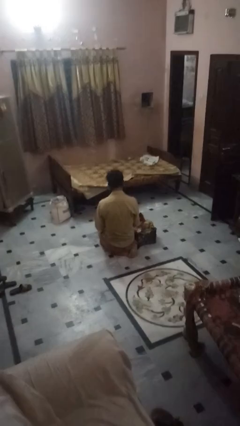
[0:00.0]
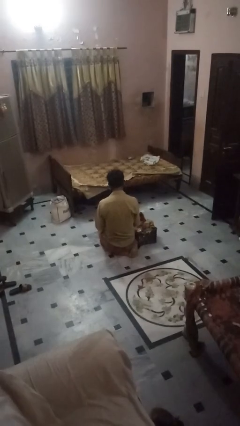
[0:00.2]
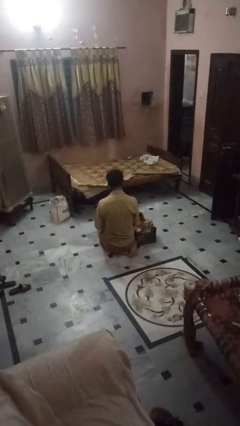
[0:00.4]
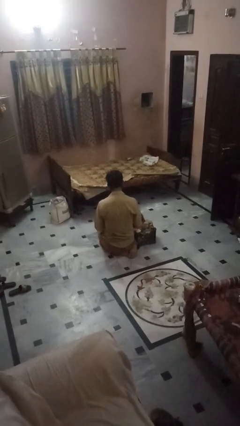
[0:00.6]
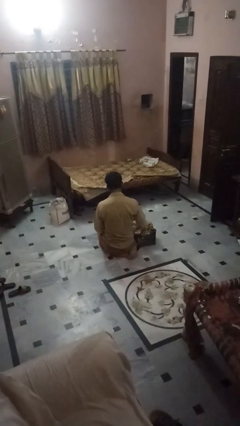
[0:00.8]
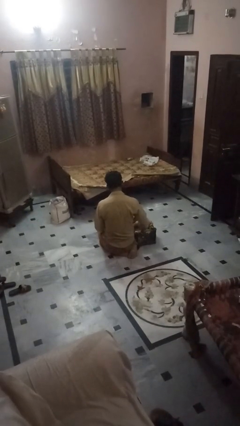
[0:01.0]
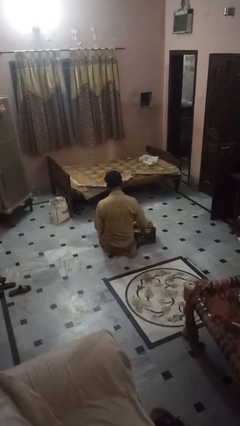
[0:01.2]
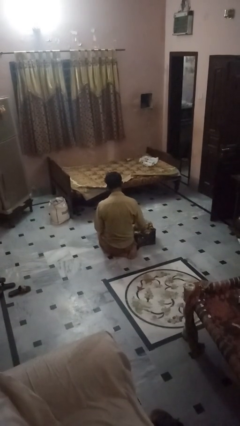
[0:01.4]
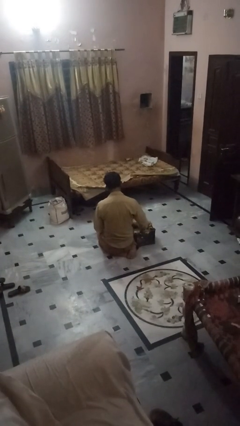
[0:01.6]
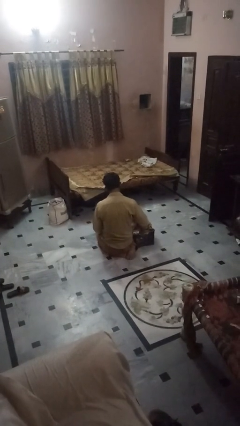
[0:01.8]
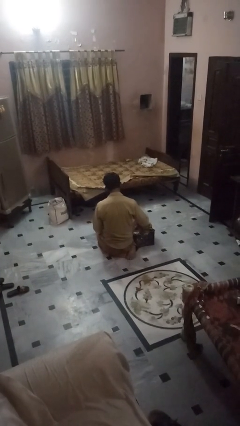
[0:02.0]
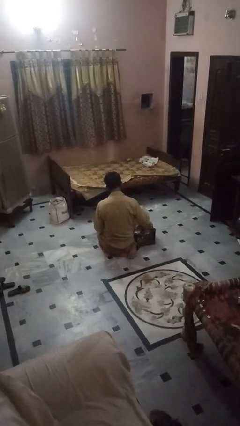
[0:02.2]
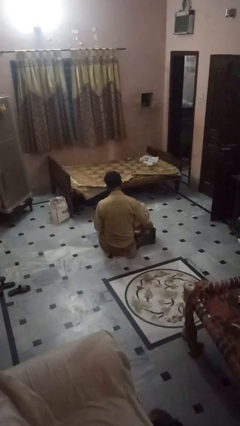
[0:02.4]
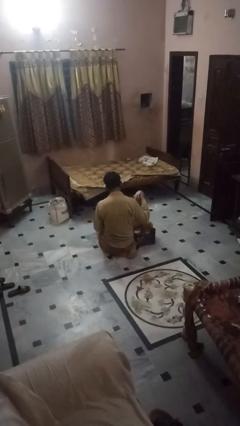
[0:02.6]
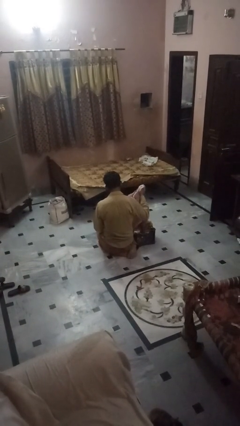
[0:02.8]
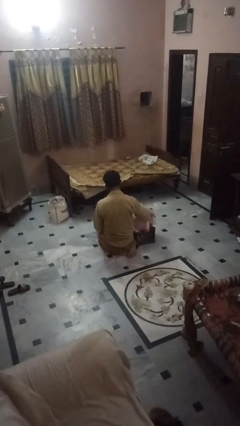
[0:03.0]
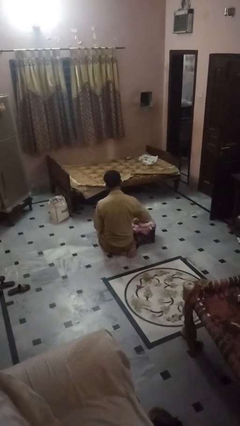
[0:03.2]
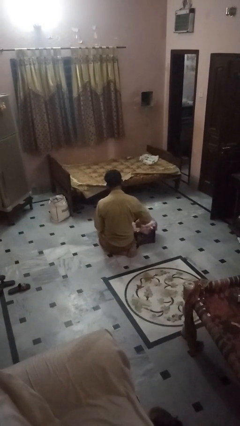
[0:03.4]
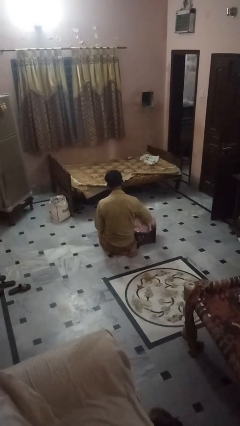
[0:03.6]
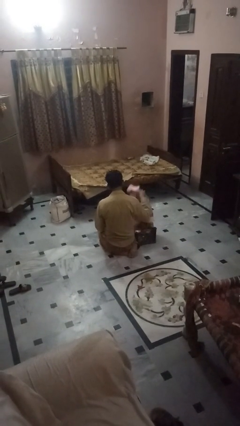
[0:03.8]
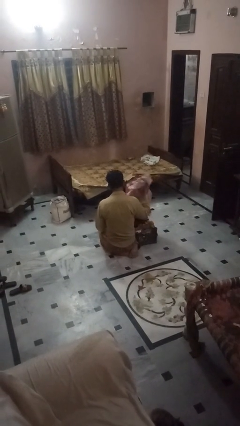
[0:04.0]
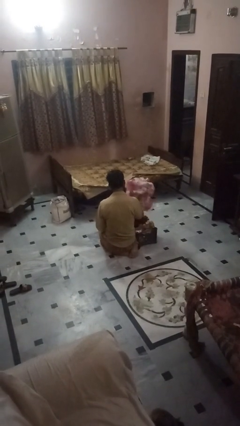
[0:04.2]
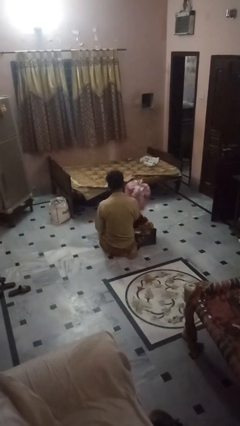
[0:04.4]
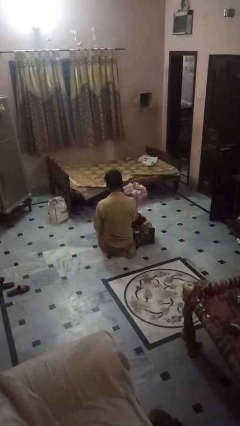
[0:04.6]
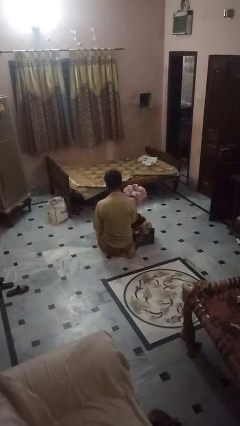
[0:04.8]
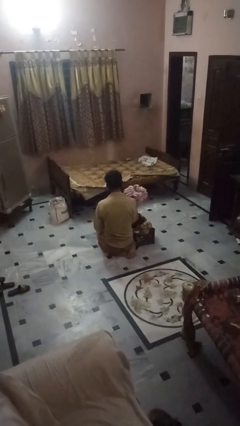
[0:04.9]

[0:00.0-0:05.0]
person takes object from bag

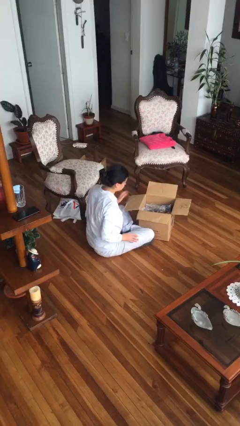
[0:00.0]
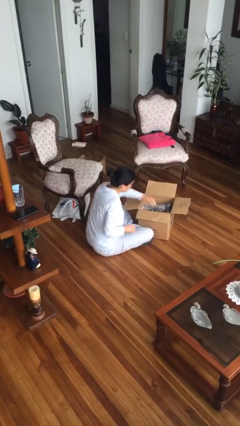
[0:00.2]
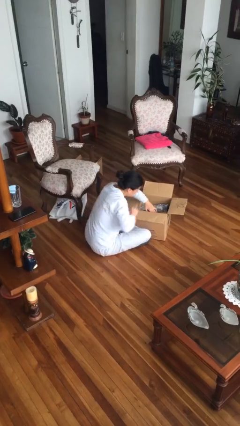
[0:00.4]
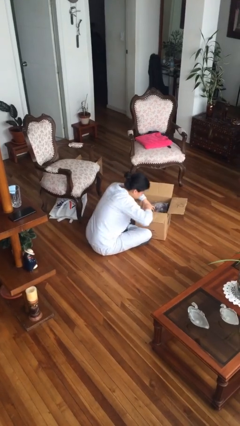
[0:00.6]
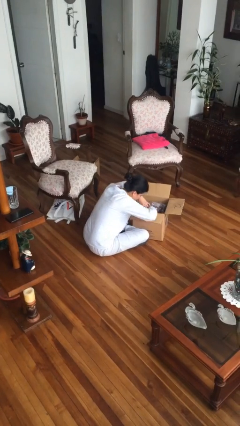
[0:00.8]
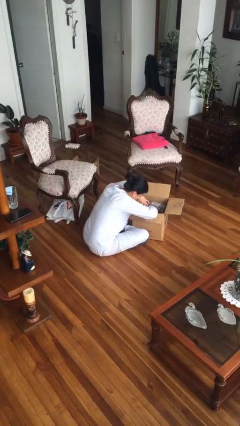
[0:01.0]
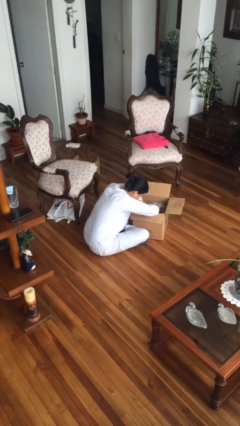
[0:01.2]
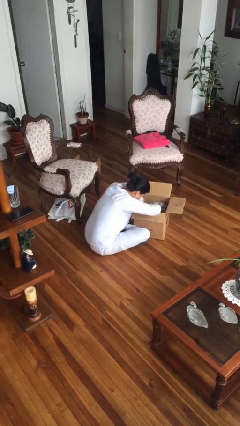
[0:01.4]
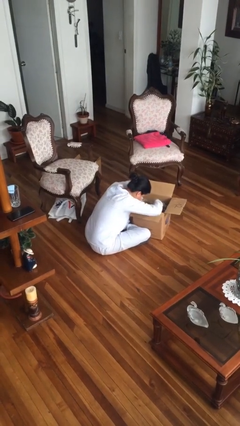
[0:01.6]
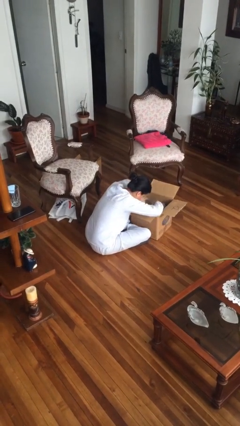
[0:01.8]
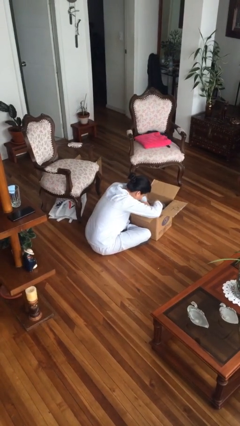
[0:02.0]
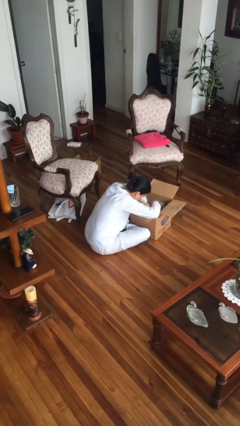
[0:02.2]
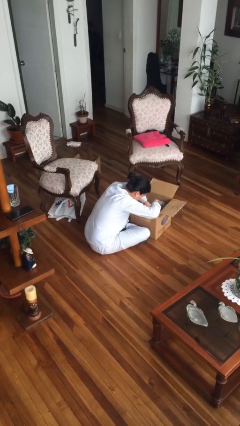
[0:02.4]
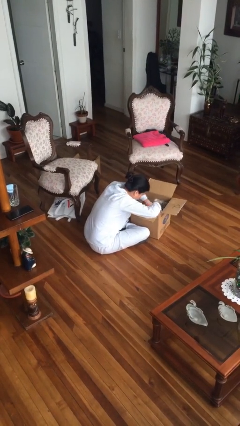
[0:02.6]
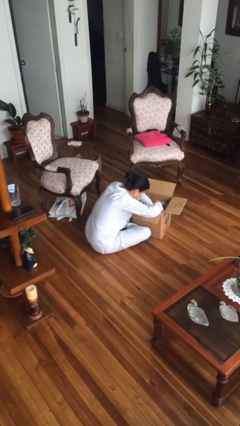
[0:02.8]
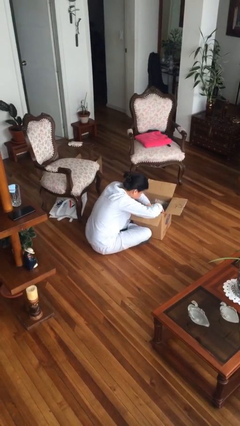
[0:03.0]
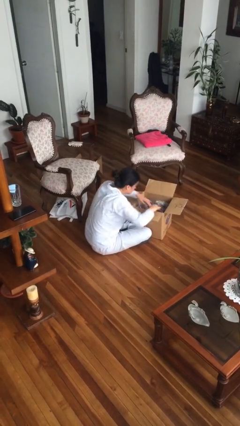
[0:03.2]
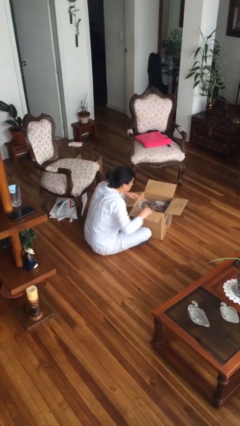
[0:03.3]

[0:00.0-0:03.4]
person searches in box

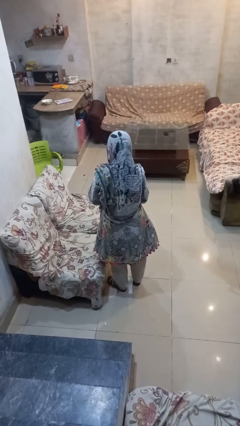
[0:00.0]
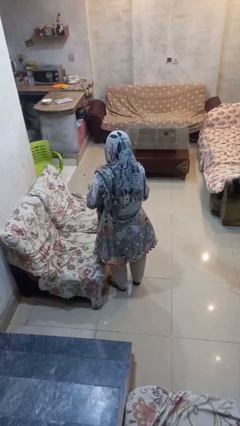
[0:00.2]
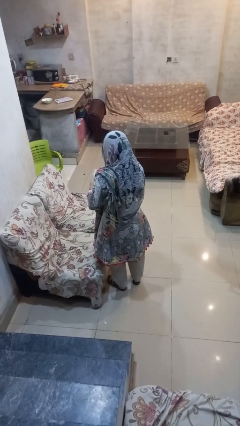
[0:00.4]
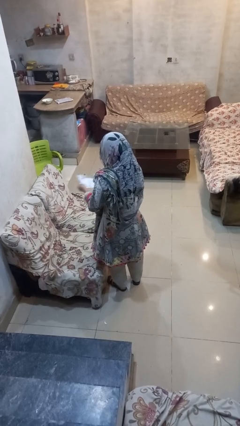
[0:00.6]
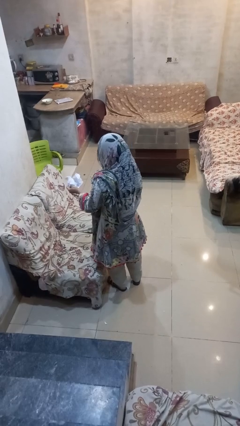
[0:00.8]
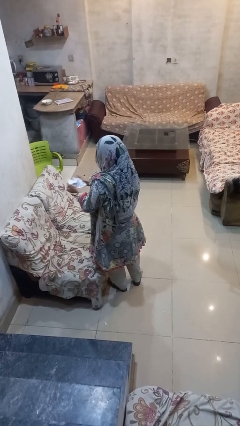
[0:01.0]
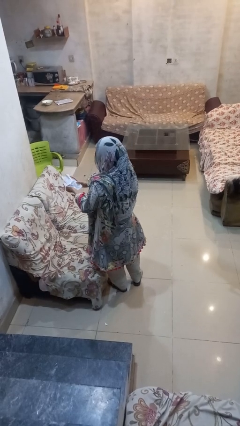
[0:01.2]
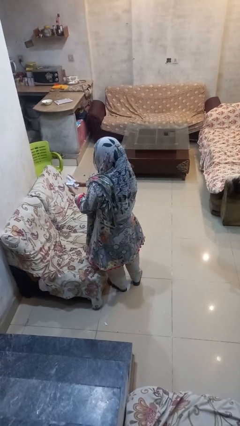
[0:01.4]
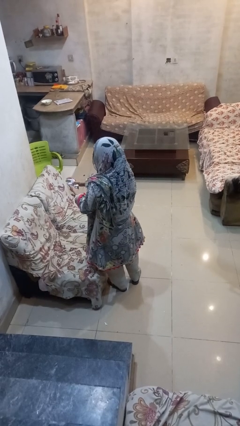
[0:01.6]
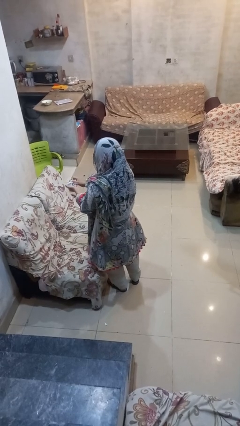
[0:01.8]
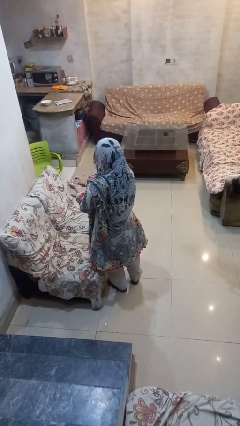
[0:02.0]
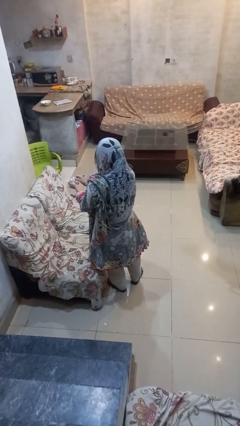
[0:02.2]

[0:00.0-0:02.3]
person crumples paper

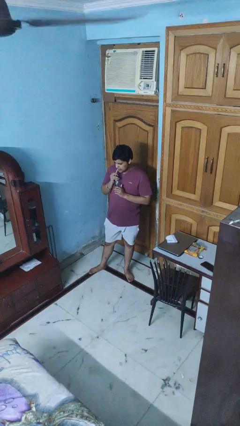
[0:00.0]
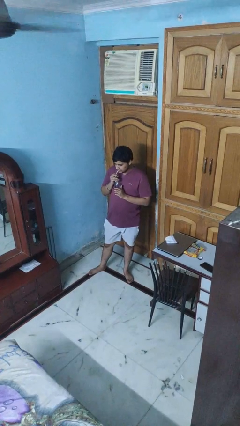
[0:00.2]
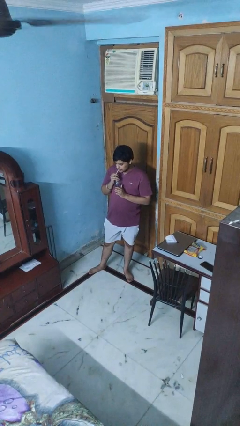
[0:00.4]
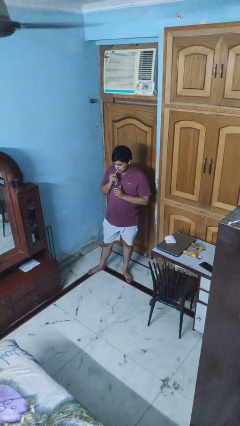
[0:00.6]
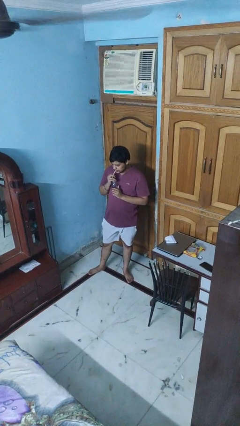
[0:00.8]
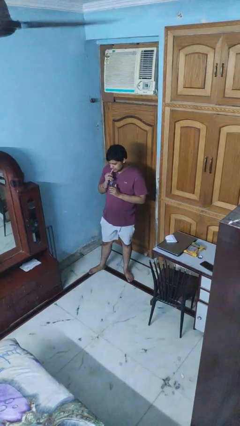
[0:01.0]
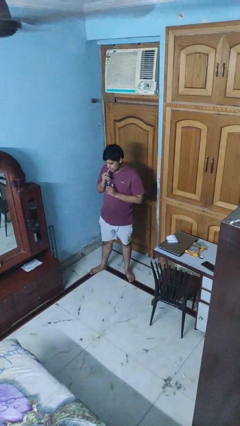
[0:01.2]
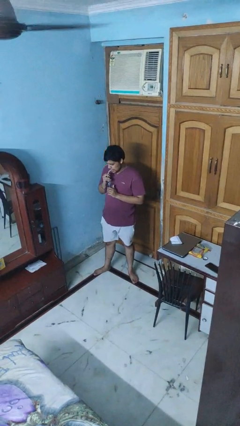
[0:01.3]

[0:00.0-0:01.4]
person drinks from straw

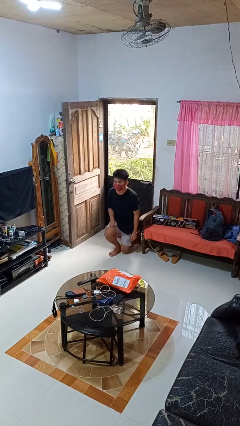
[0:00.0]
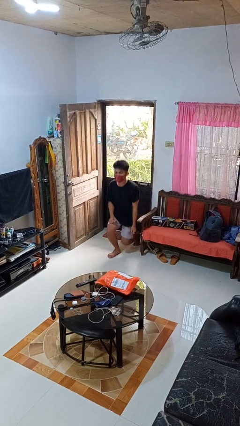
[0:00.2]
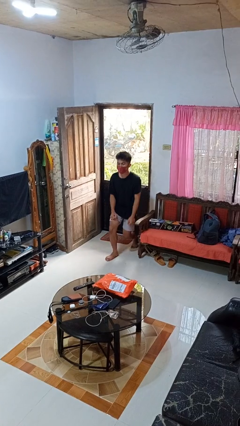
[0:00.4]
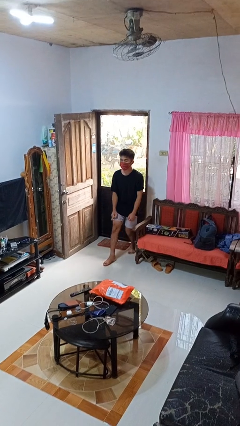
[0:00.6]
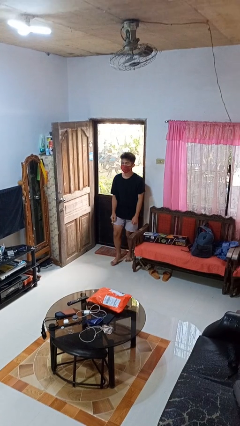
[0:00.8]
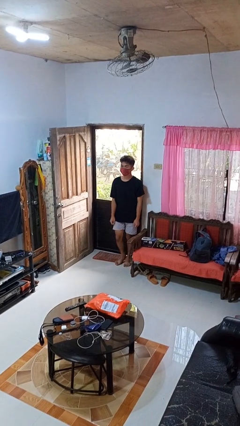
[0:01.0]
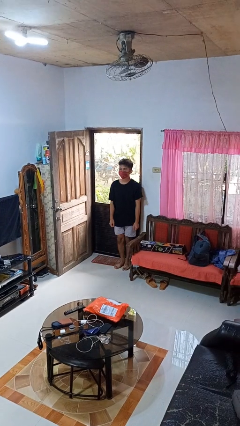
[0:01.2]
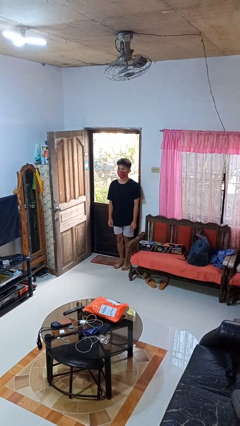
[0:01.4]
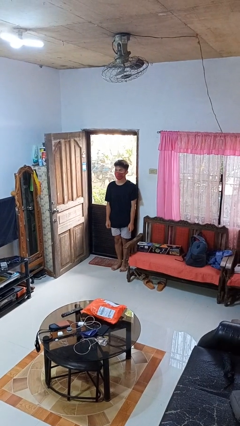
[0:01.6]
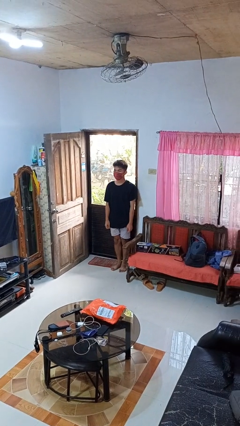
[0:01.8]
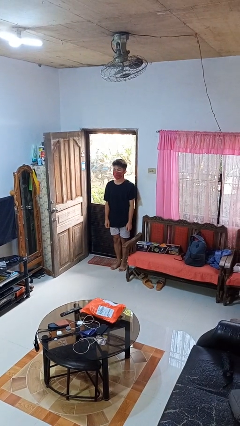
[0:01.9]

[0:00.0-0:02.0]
person stands up from floor

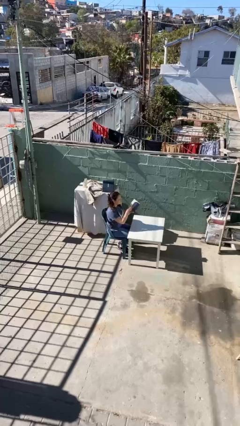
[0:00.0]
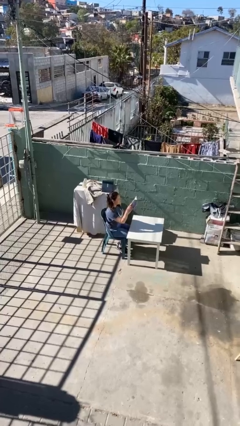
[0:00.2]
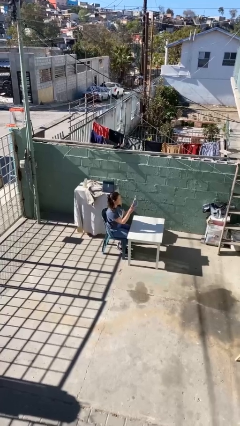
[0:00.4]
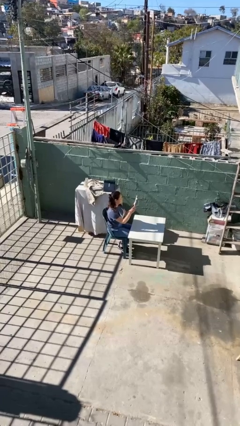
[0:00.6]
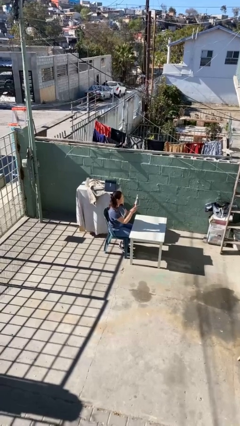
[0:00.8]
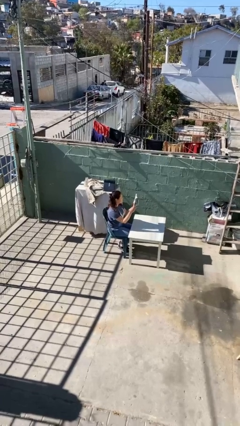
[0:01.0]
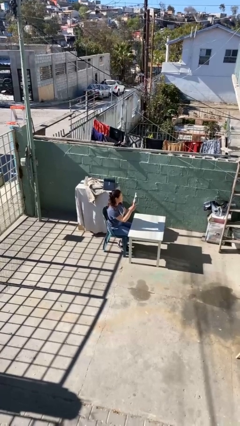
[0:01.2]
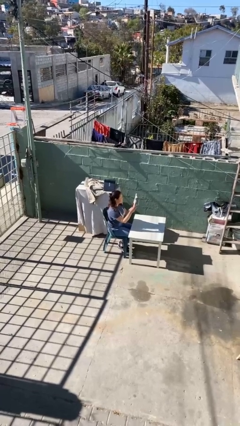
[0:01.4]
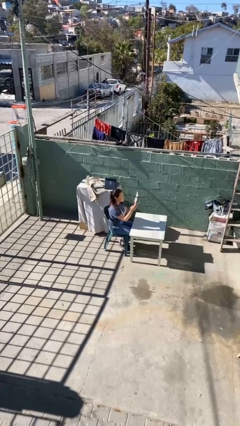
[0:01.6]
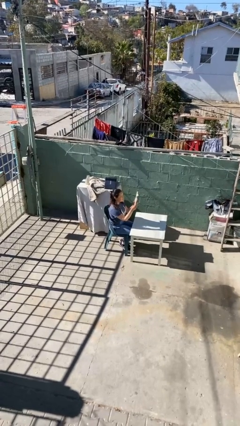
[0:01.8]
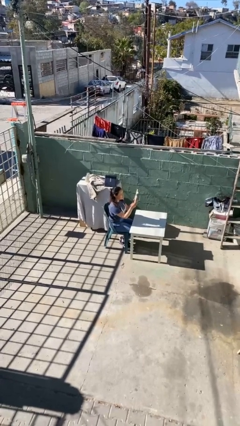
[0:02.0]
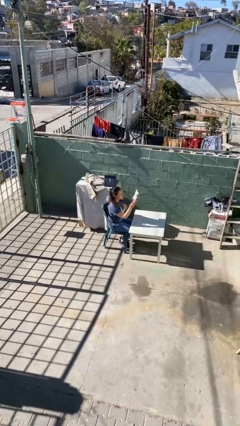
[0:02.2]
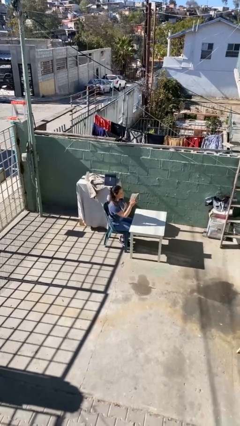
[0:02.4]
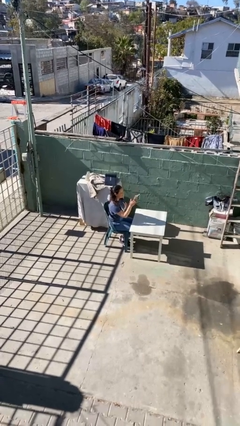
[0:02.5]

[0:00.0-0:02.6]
person reads document

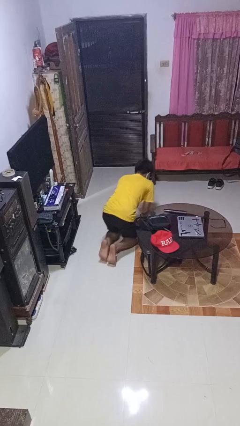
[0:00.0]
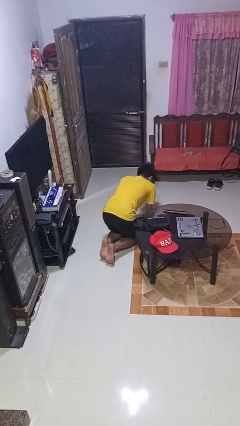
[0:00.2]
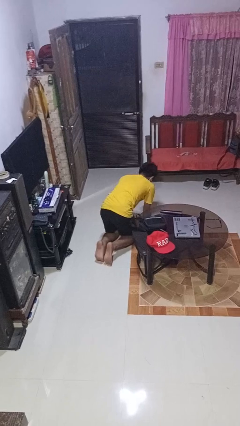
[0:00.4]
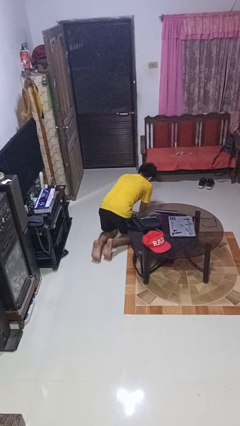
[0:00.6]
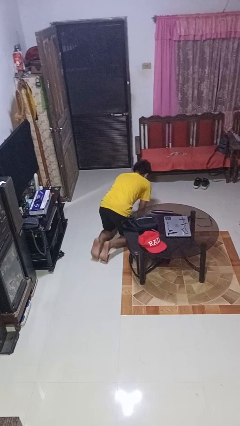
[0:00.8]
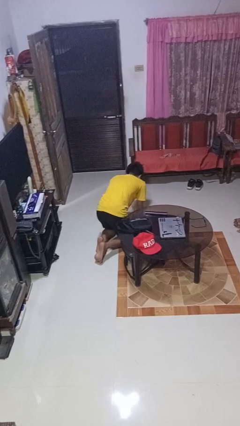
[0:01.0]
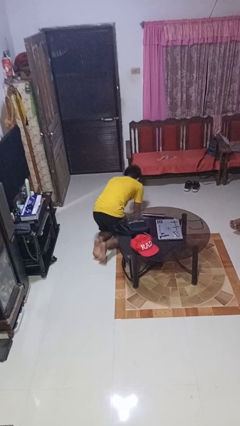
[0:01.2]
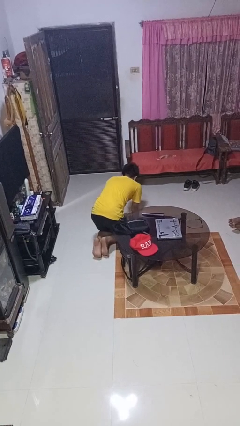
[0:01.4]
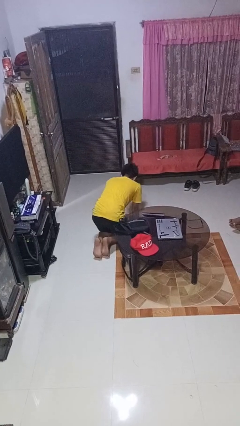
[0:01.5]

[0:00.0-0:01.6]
person crawls
